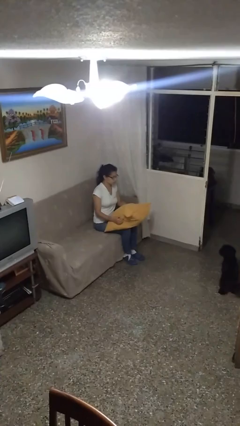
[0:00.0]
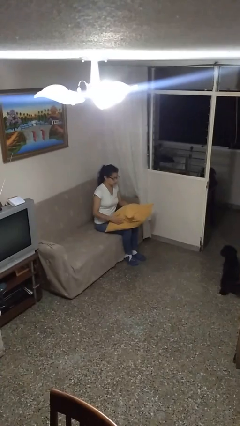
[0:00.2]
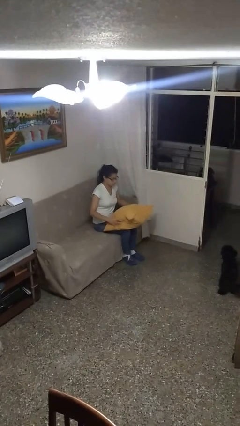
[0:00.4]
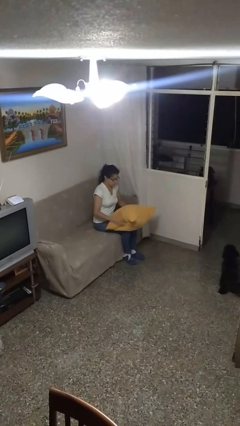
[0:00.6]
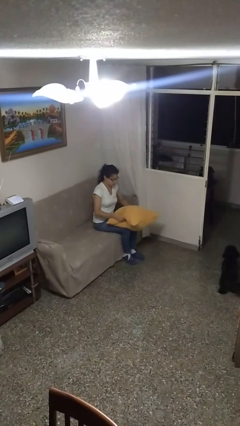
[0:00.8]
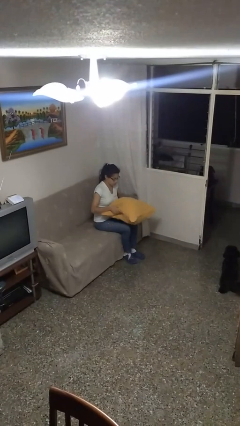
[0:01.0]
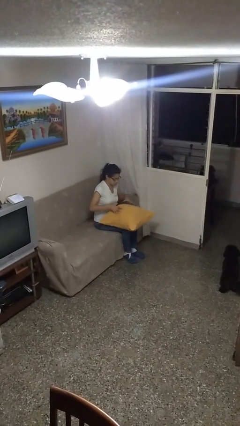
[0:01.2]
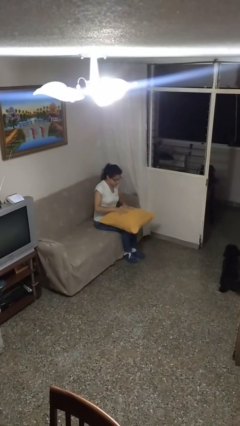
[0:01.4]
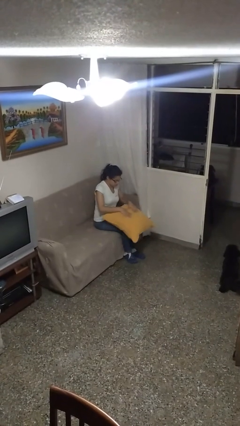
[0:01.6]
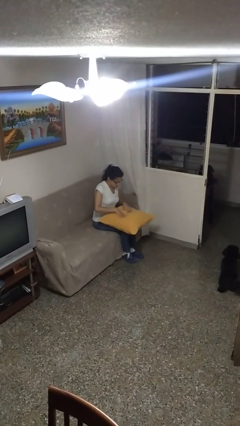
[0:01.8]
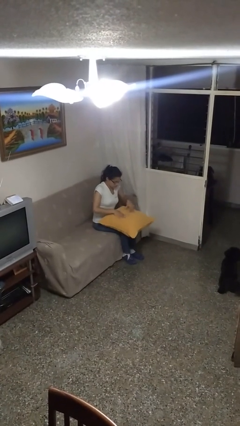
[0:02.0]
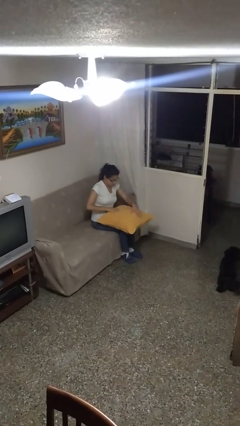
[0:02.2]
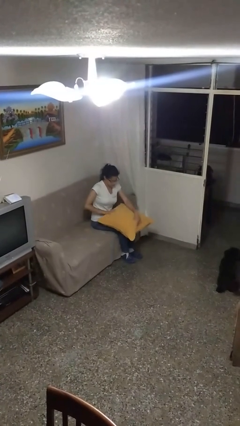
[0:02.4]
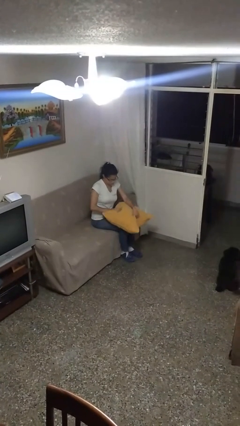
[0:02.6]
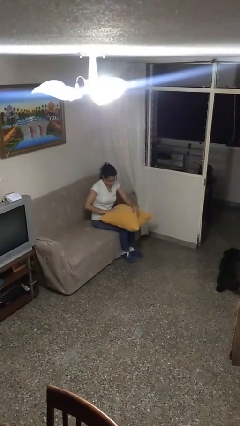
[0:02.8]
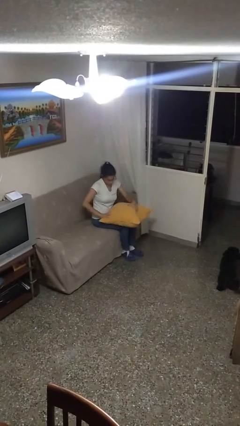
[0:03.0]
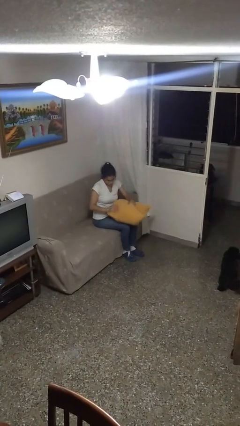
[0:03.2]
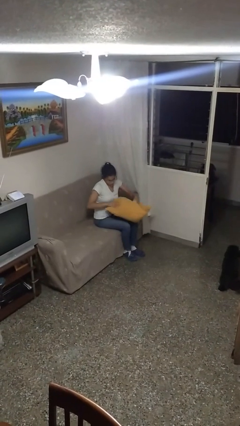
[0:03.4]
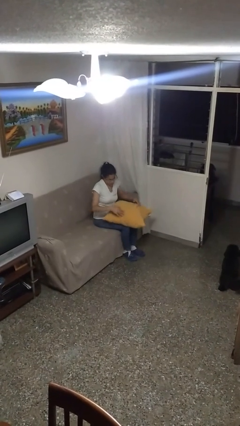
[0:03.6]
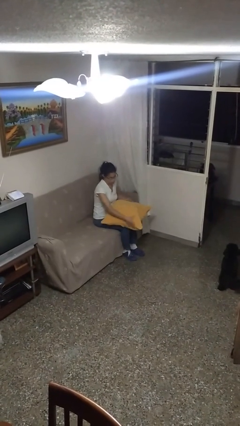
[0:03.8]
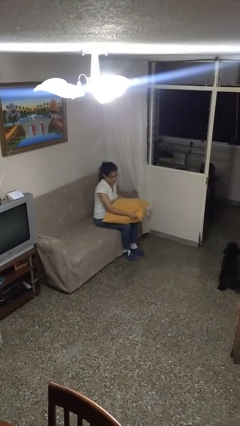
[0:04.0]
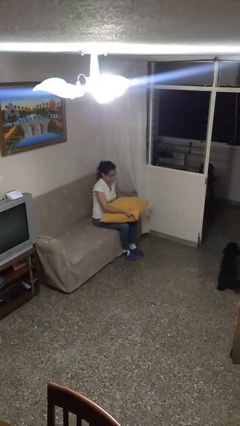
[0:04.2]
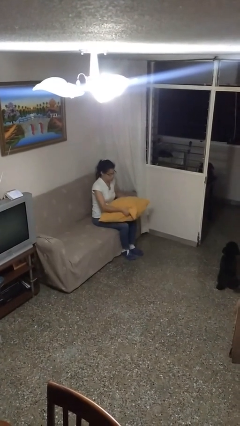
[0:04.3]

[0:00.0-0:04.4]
person squeezes object

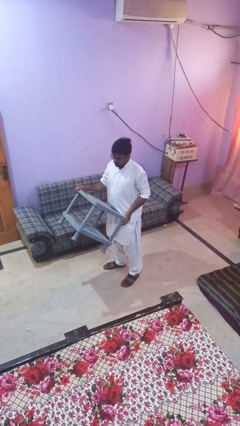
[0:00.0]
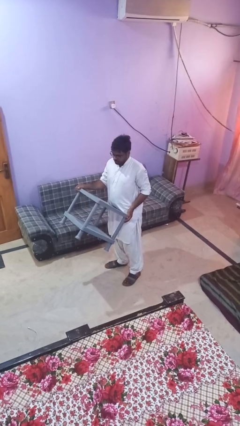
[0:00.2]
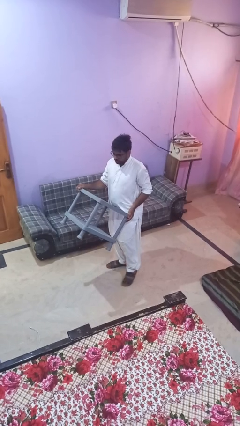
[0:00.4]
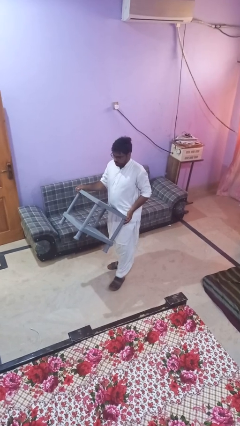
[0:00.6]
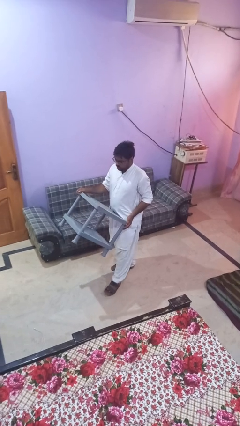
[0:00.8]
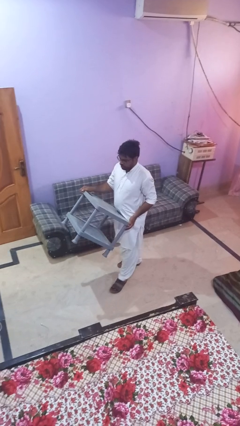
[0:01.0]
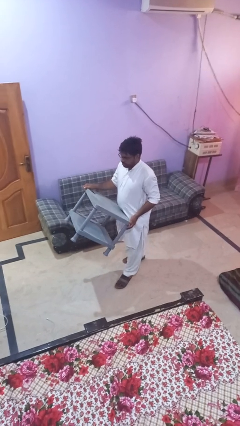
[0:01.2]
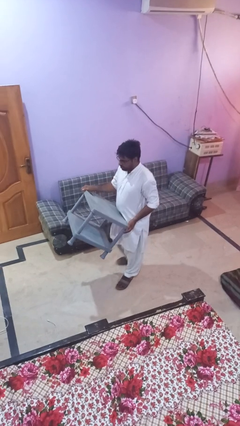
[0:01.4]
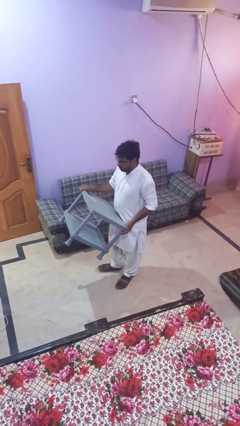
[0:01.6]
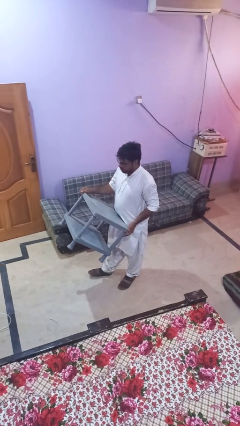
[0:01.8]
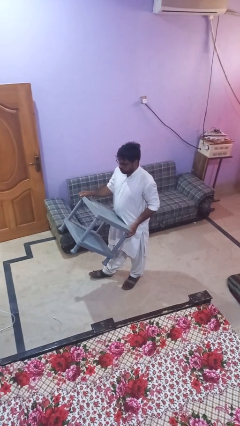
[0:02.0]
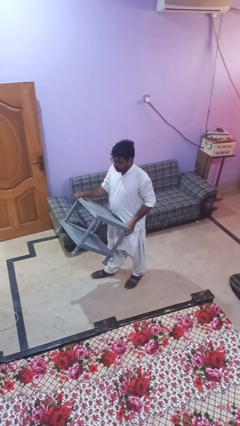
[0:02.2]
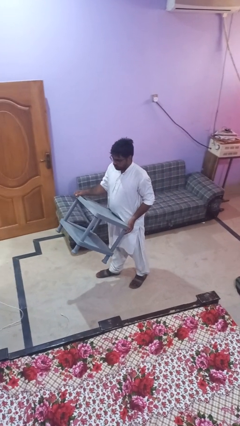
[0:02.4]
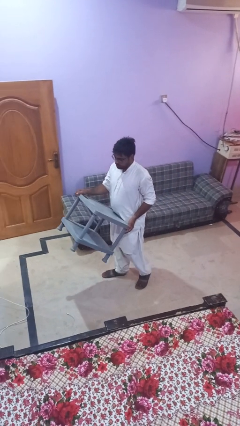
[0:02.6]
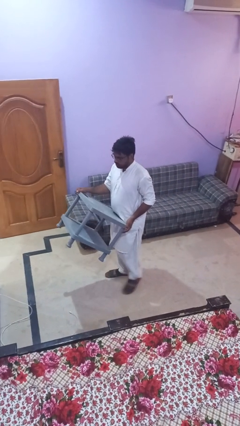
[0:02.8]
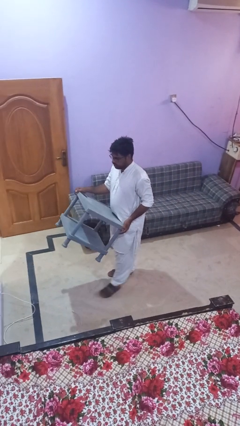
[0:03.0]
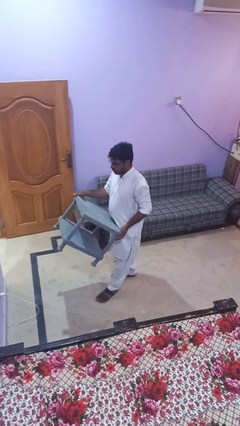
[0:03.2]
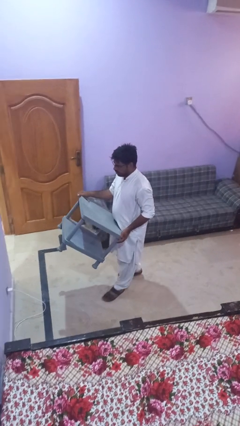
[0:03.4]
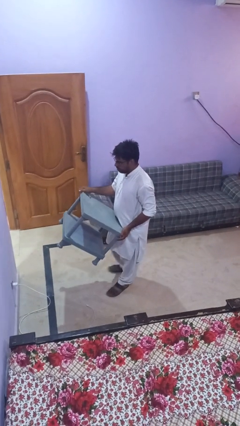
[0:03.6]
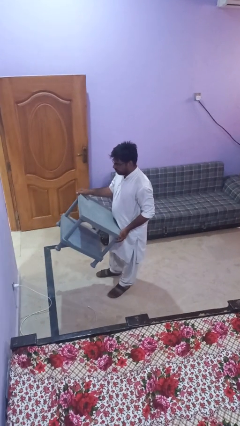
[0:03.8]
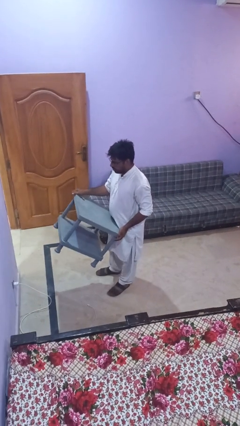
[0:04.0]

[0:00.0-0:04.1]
person carries furniture

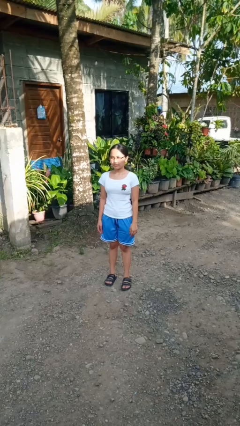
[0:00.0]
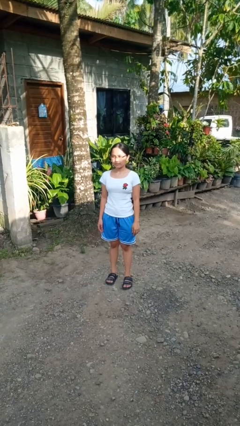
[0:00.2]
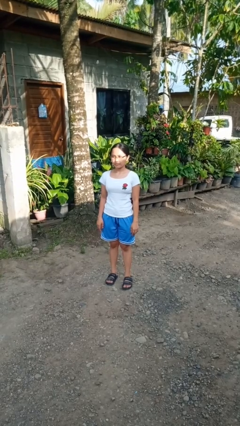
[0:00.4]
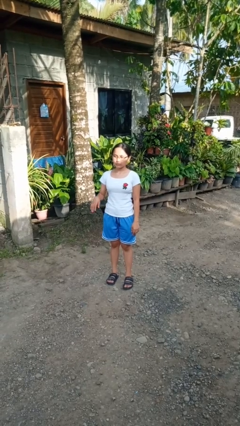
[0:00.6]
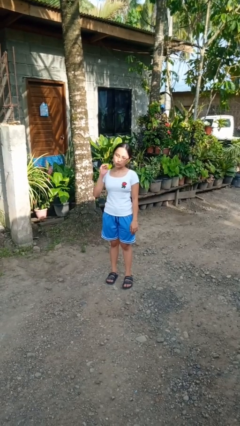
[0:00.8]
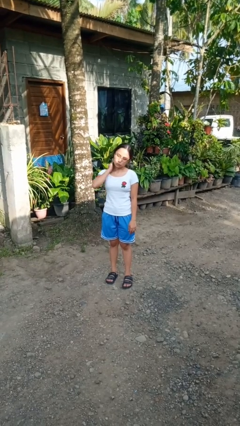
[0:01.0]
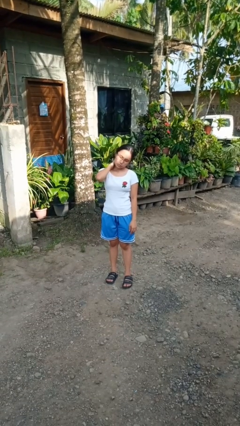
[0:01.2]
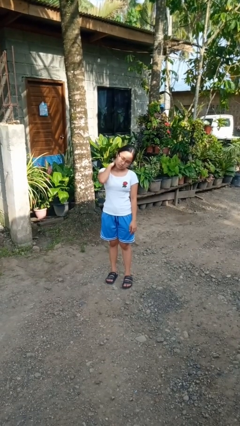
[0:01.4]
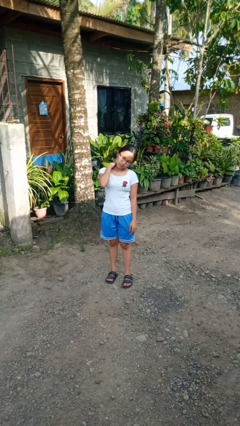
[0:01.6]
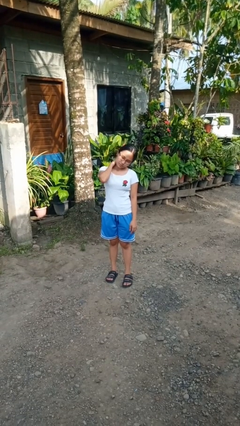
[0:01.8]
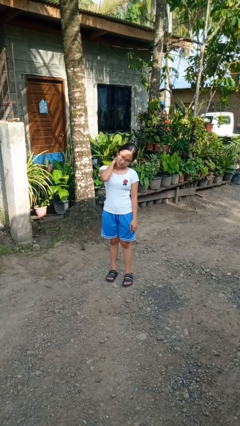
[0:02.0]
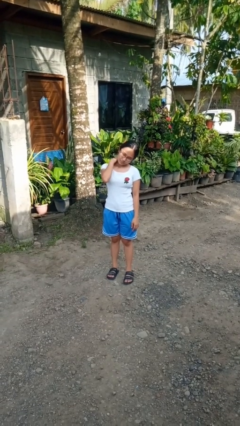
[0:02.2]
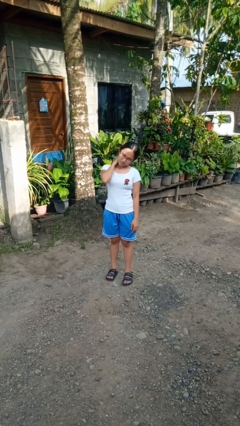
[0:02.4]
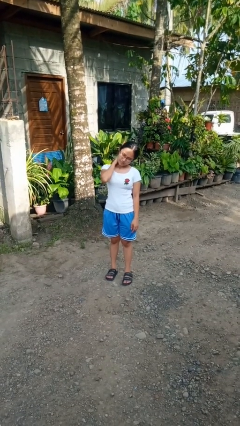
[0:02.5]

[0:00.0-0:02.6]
person rubs neck

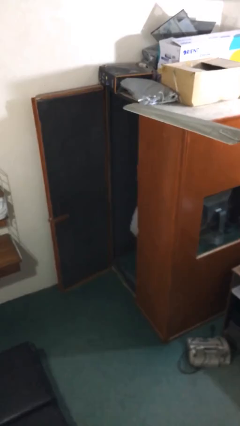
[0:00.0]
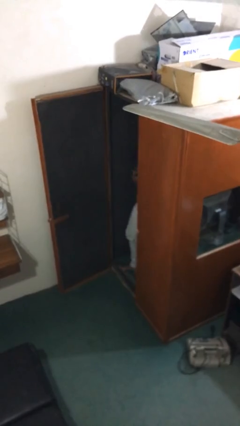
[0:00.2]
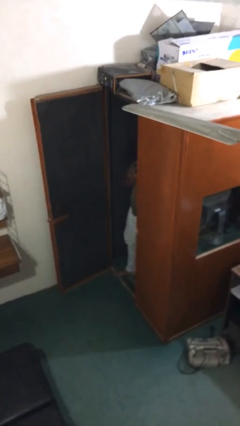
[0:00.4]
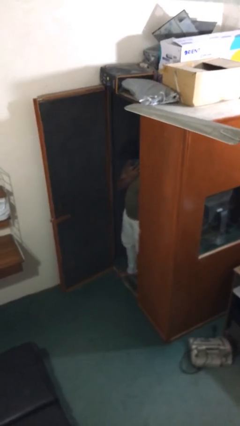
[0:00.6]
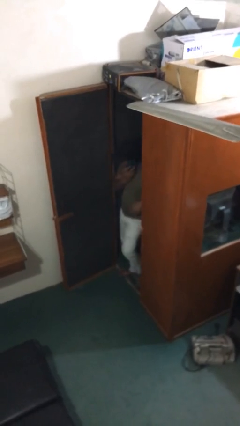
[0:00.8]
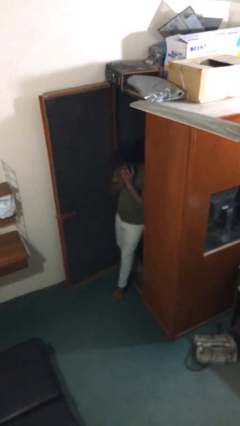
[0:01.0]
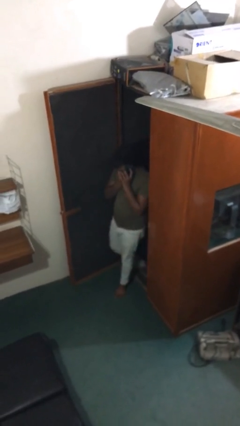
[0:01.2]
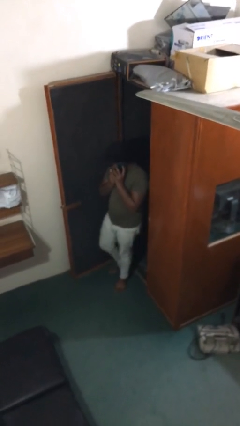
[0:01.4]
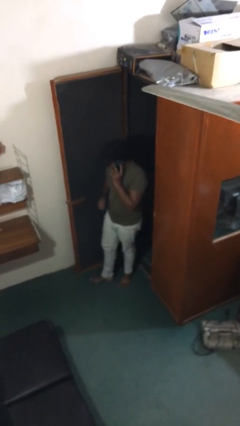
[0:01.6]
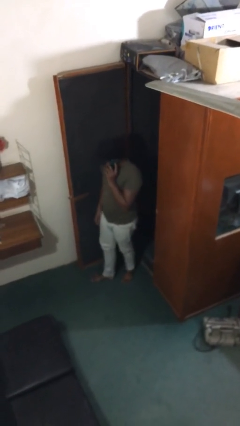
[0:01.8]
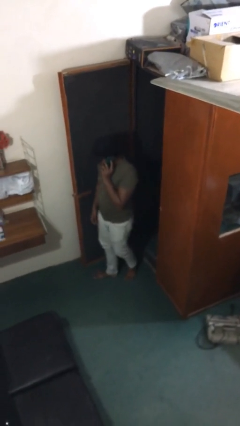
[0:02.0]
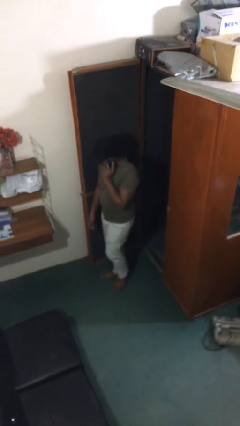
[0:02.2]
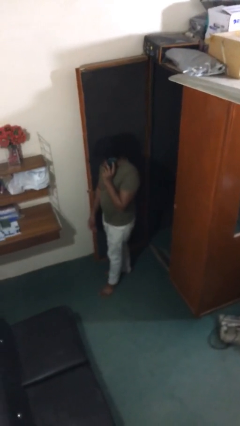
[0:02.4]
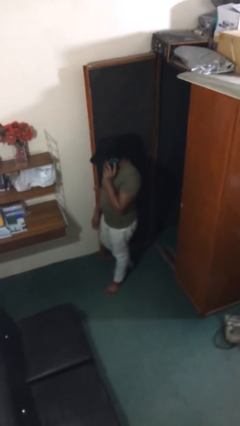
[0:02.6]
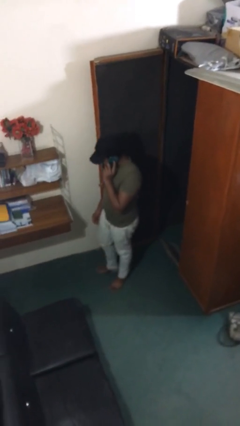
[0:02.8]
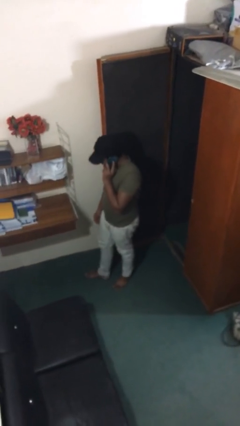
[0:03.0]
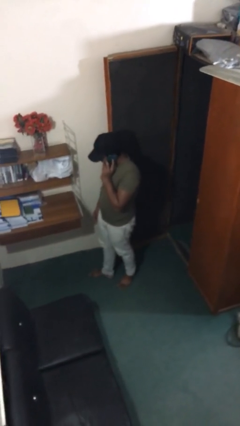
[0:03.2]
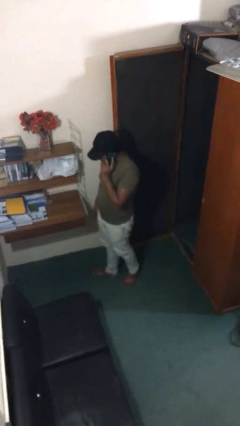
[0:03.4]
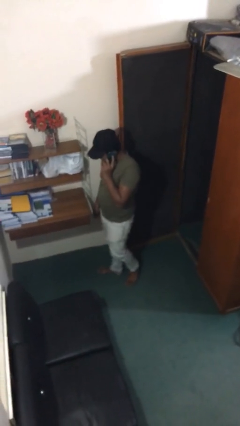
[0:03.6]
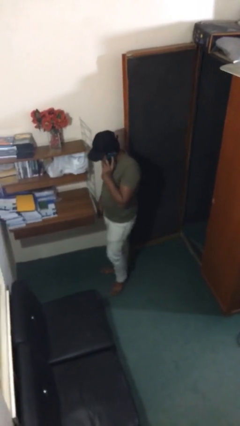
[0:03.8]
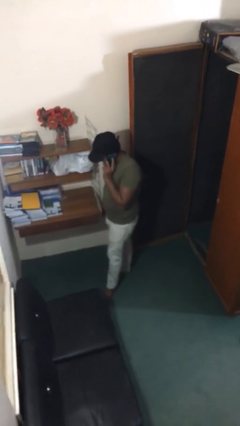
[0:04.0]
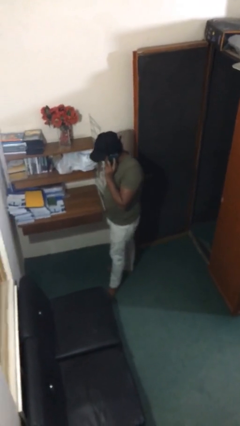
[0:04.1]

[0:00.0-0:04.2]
person enters scene through structure

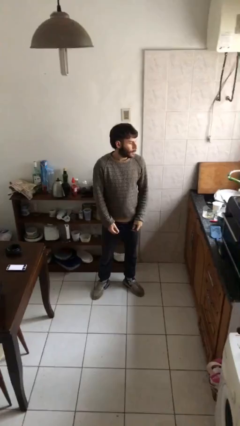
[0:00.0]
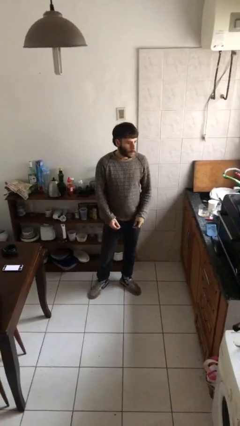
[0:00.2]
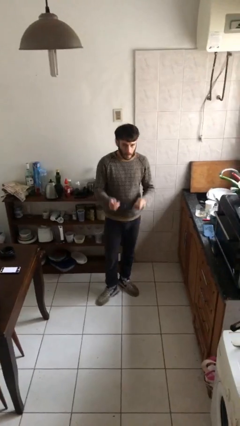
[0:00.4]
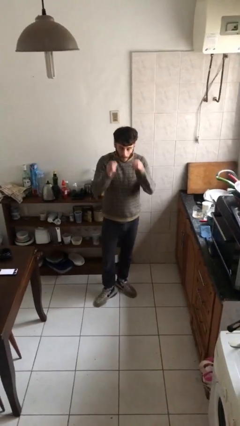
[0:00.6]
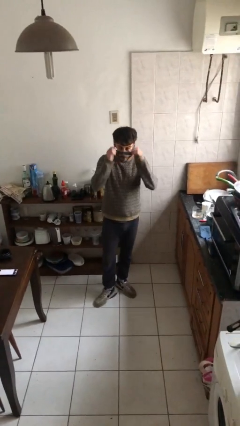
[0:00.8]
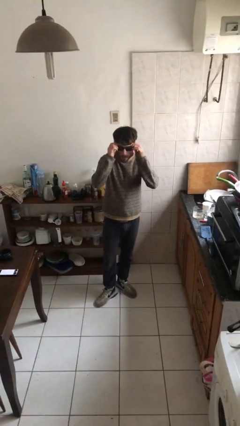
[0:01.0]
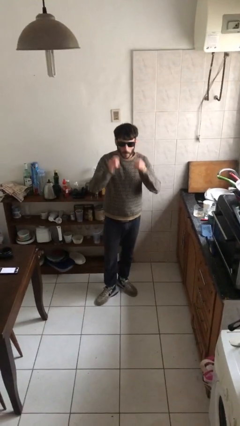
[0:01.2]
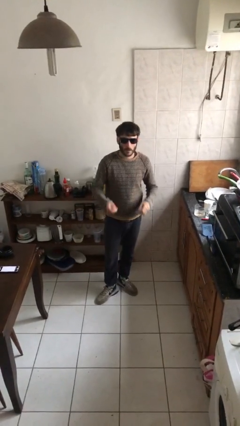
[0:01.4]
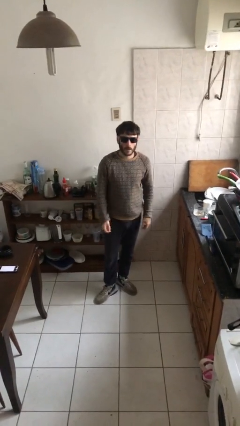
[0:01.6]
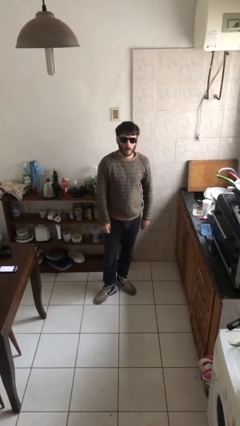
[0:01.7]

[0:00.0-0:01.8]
person puts on sunglasses

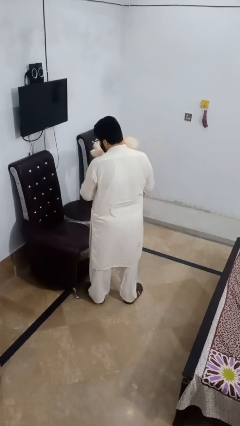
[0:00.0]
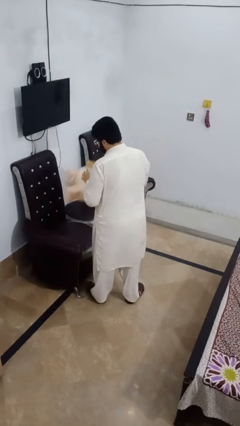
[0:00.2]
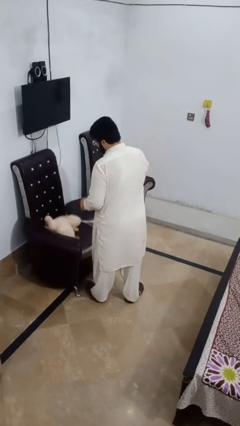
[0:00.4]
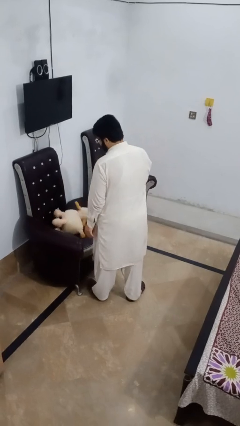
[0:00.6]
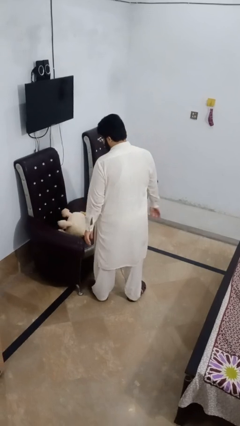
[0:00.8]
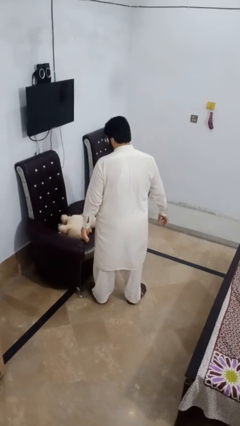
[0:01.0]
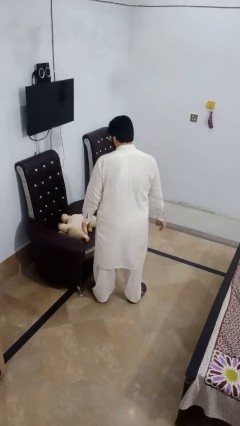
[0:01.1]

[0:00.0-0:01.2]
person puts down object on couch
